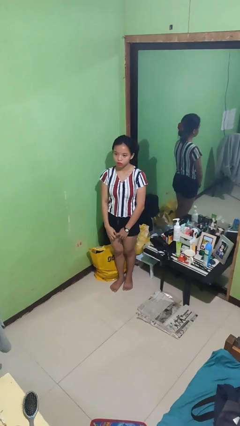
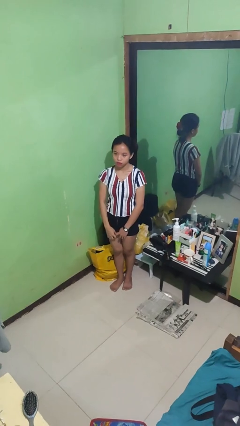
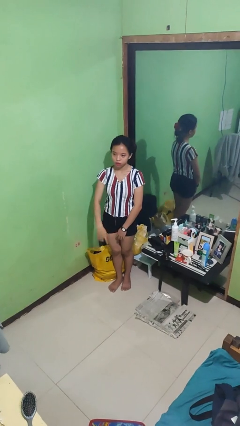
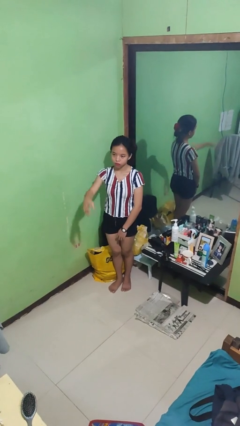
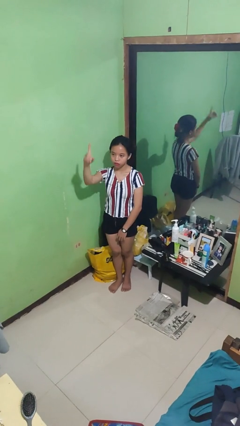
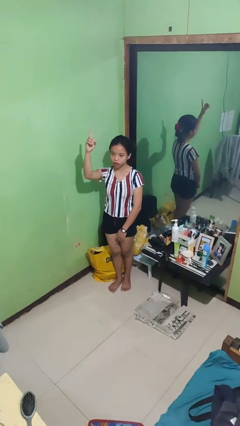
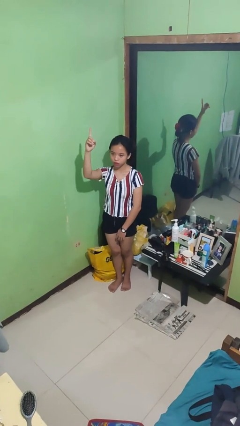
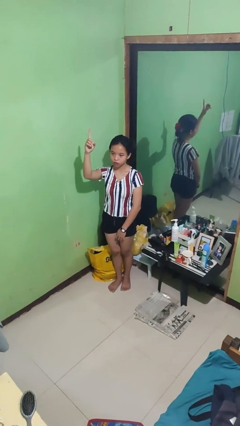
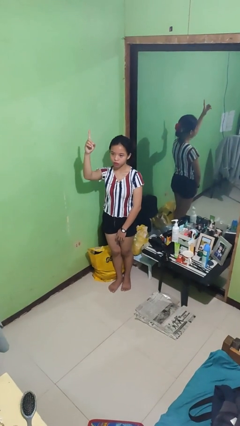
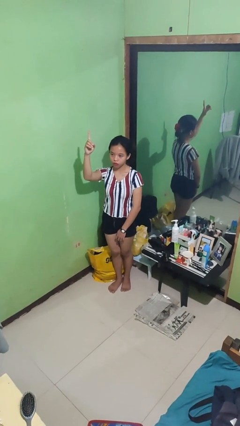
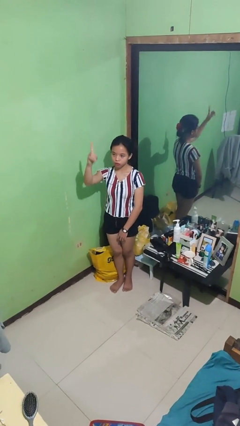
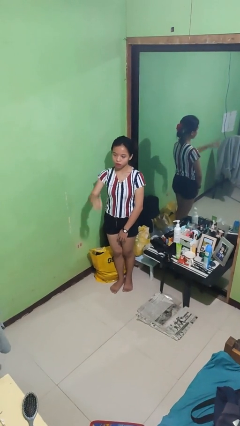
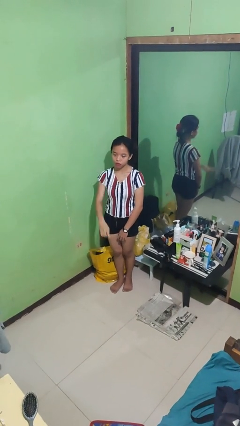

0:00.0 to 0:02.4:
person gestures number one

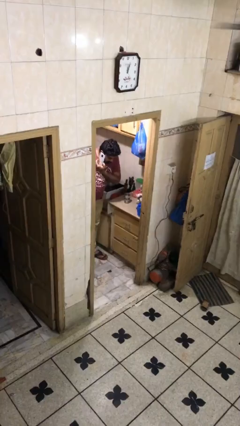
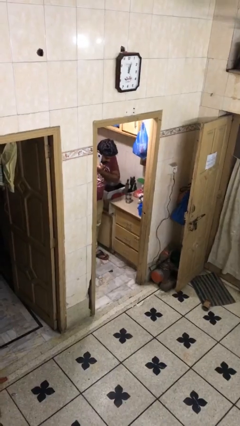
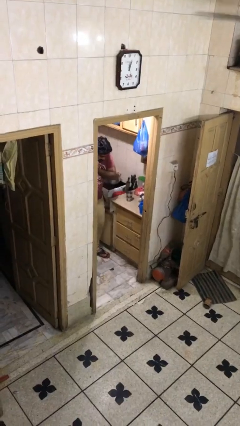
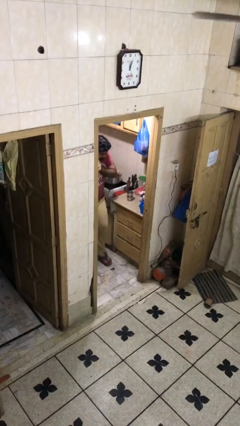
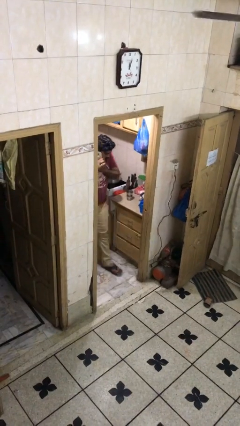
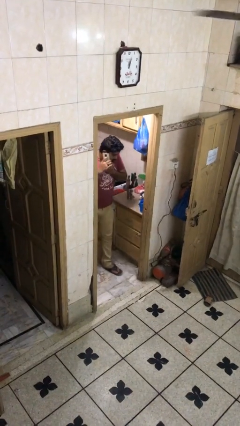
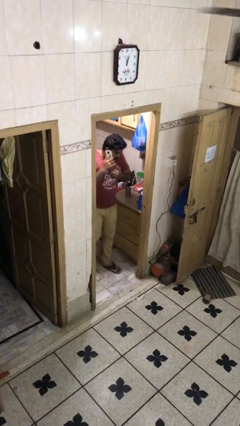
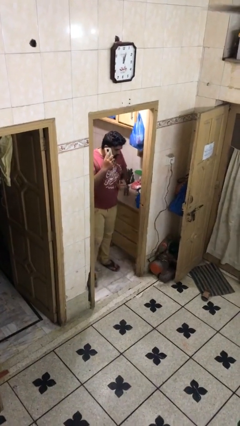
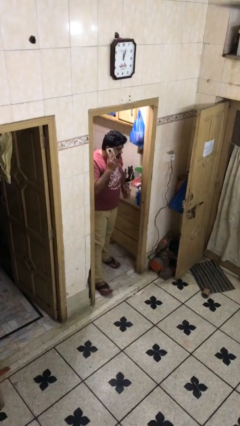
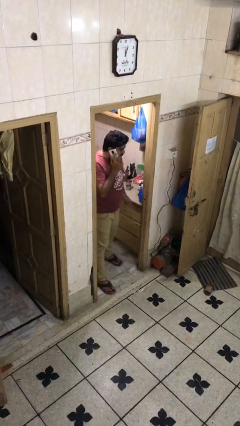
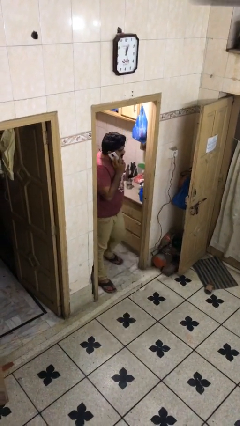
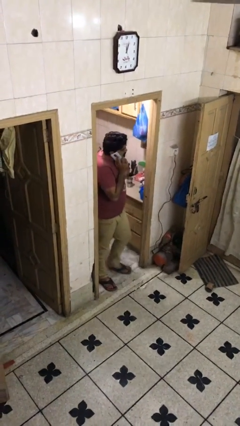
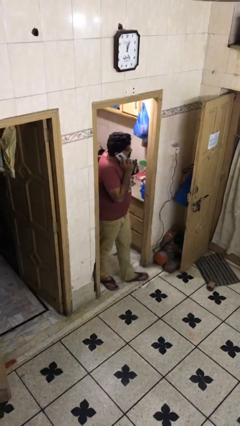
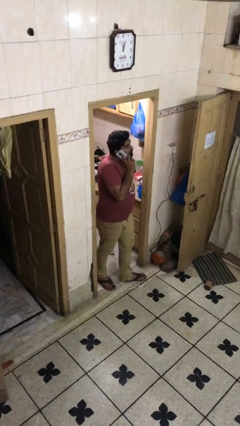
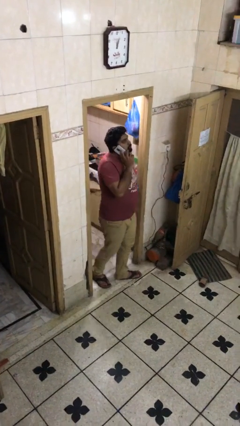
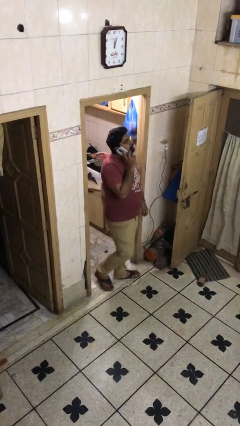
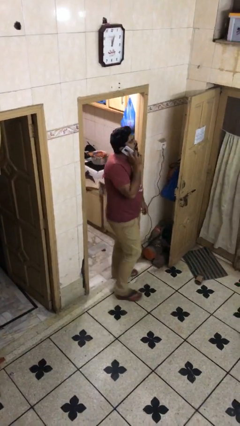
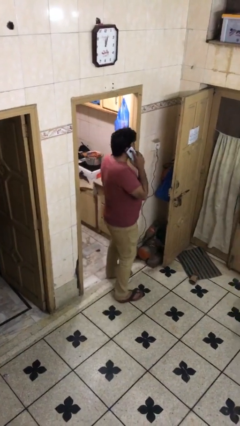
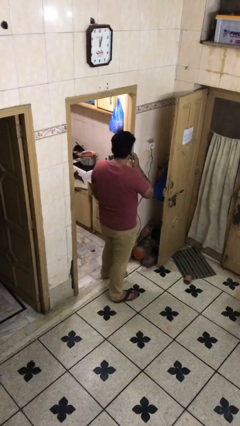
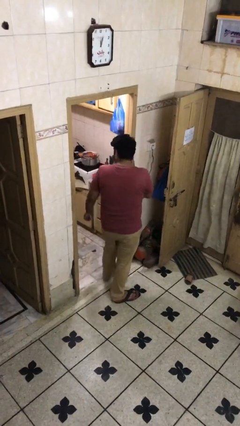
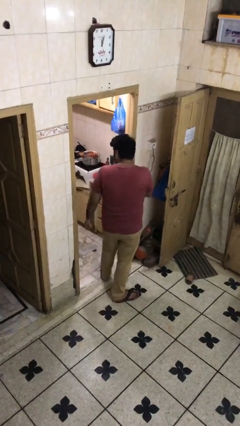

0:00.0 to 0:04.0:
person enters scene through structure

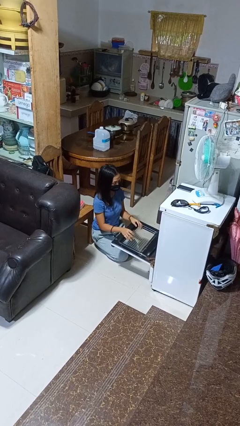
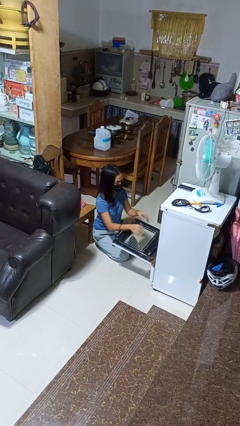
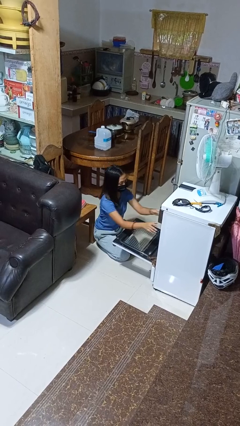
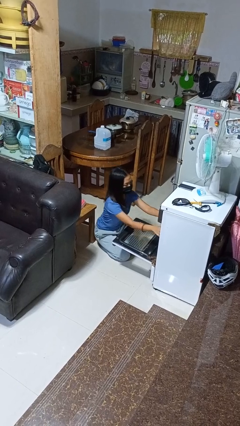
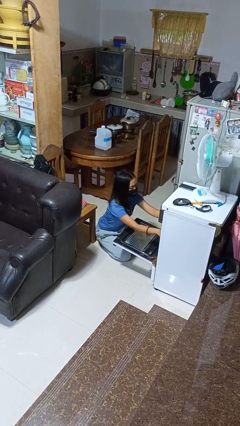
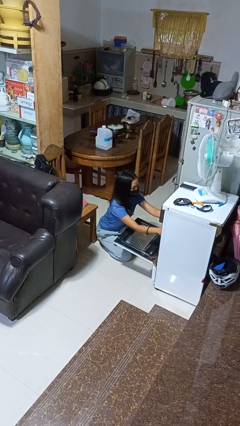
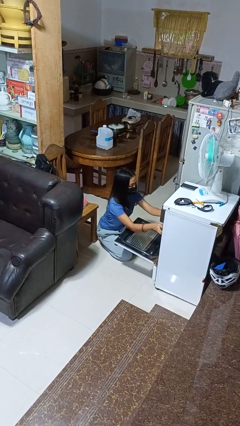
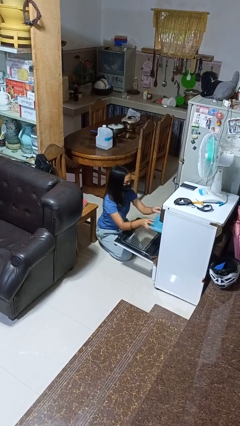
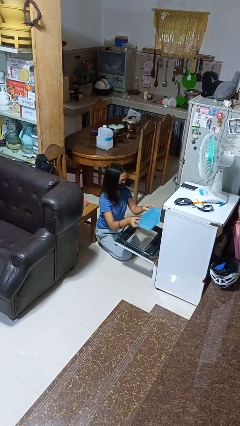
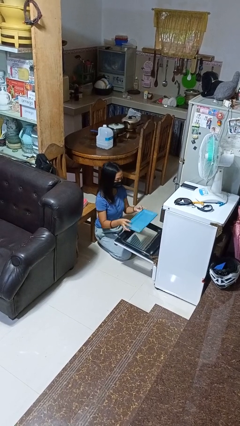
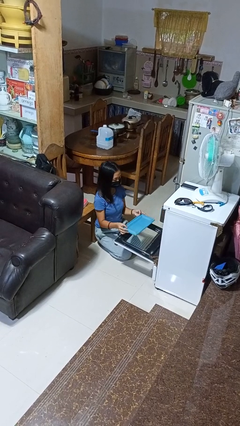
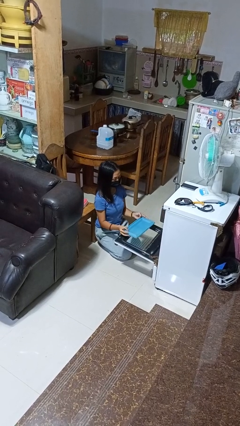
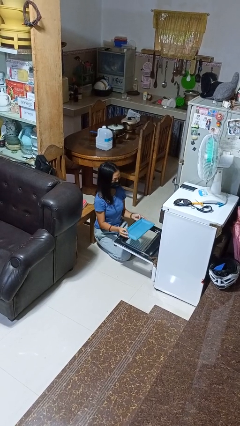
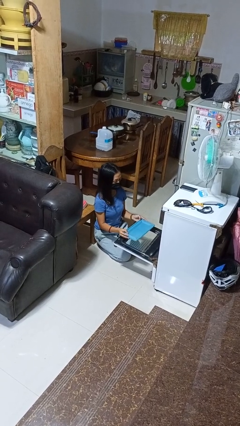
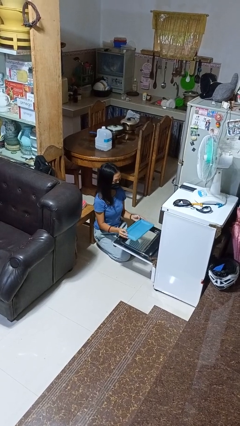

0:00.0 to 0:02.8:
person takes object from oven

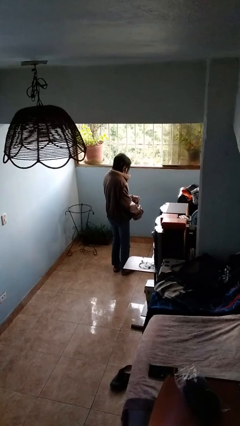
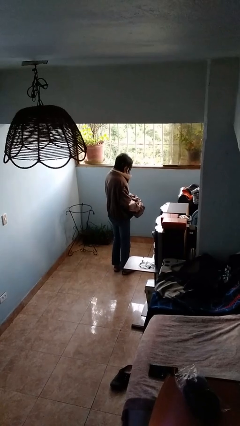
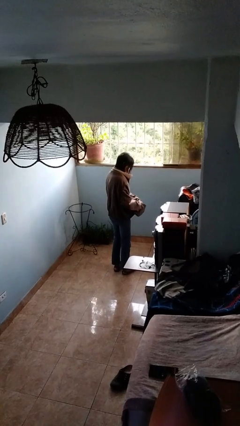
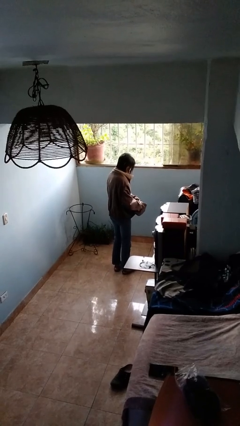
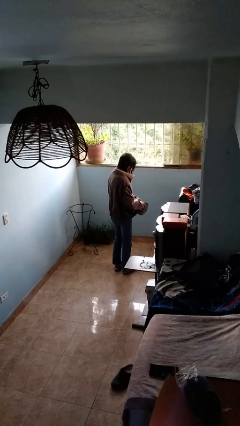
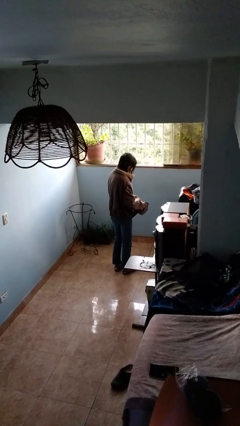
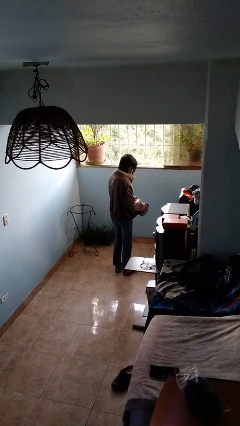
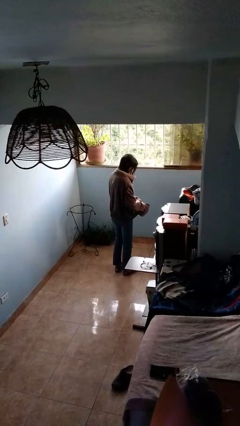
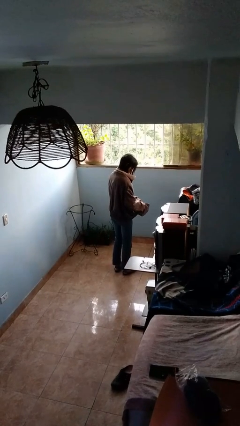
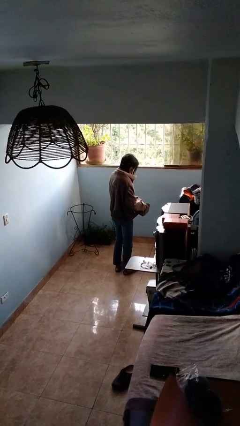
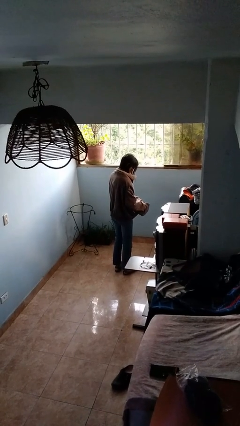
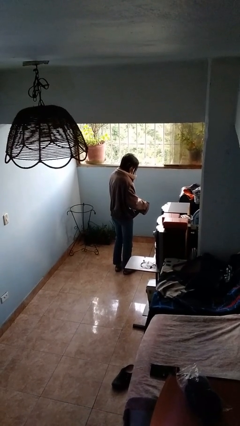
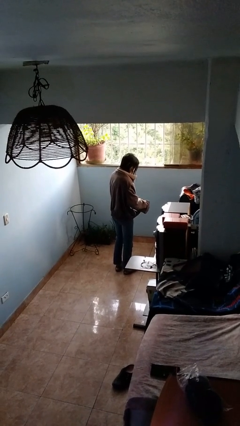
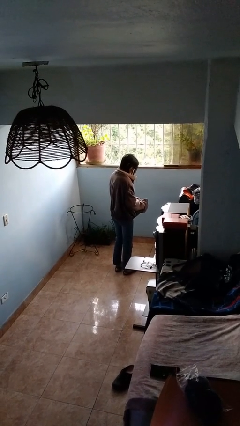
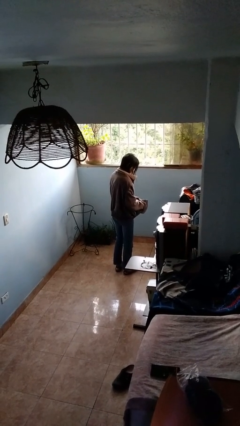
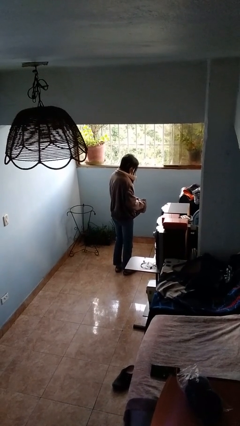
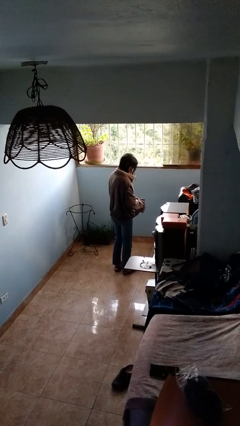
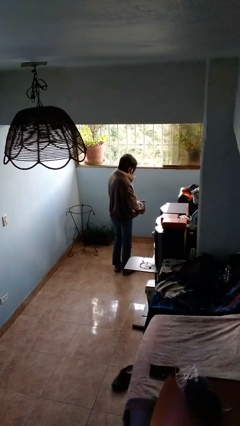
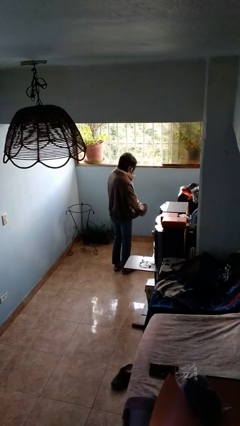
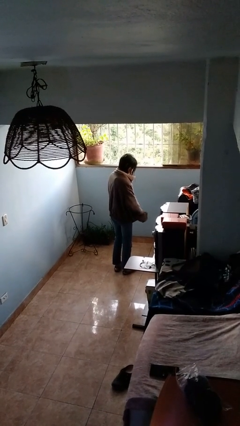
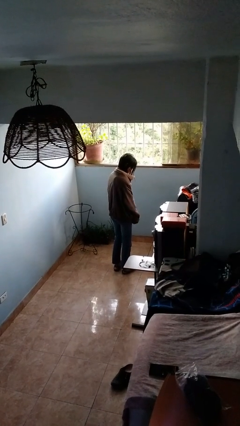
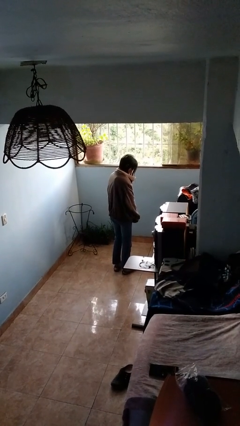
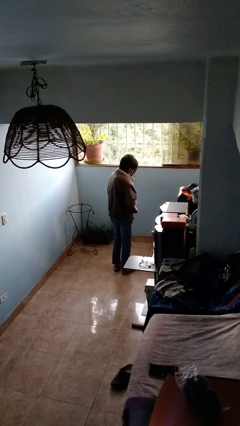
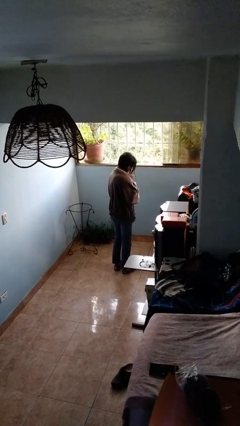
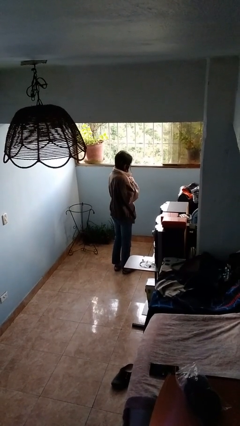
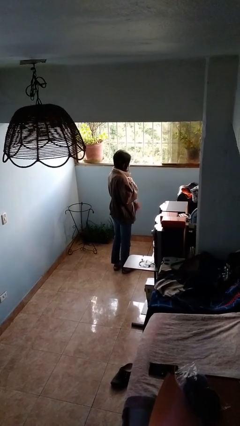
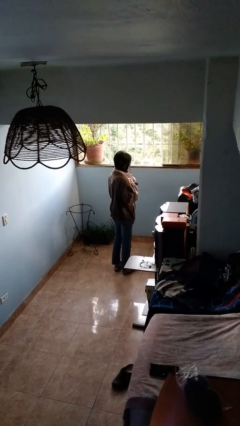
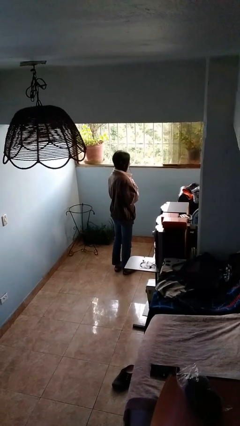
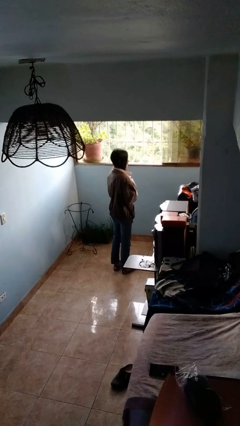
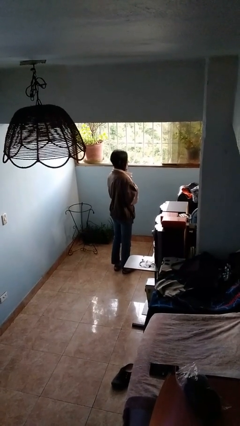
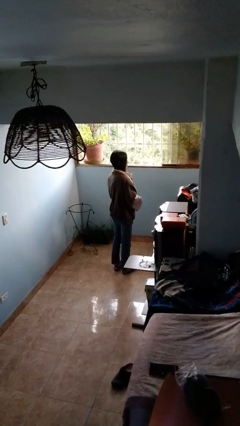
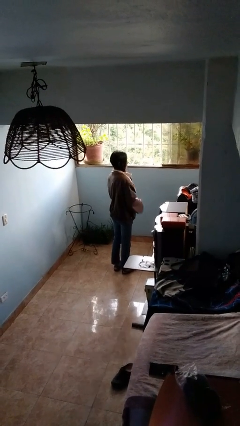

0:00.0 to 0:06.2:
person zips up jacket

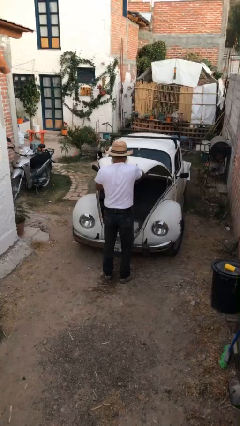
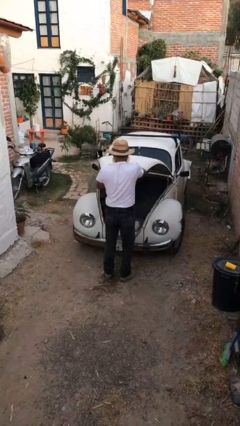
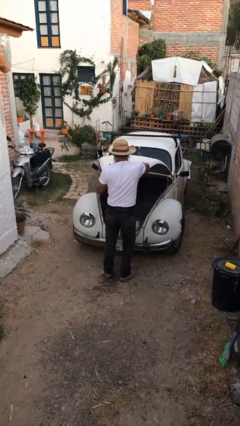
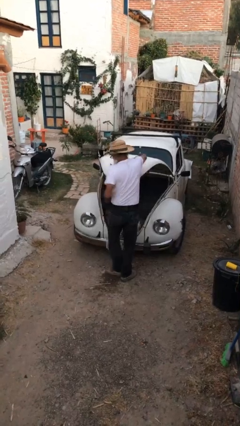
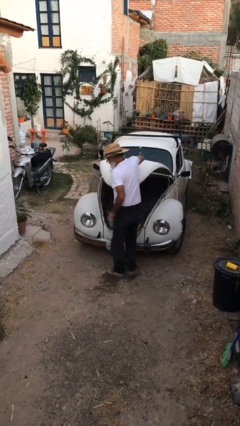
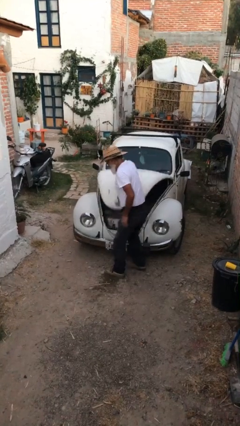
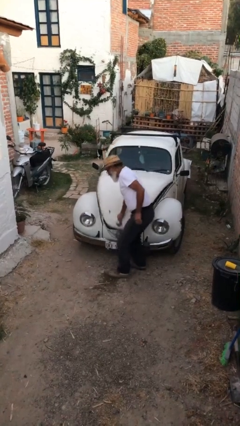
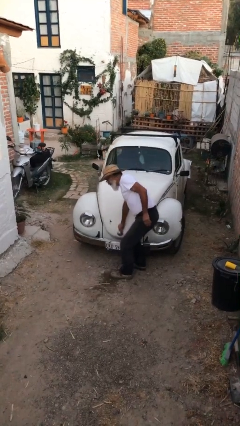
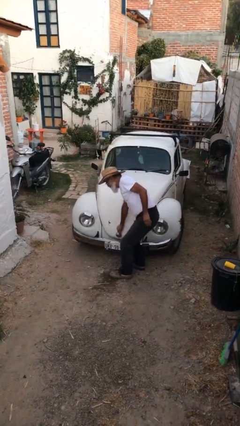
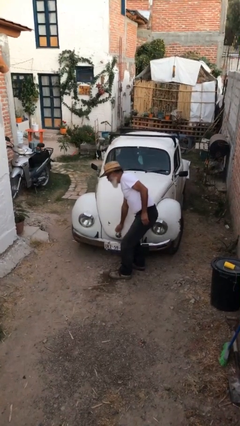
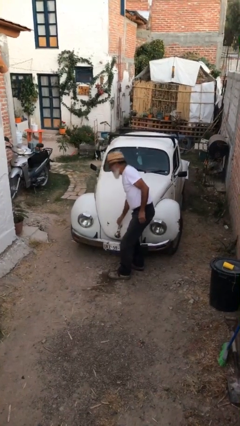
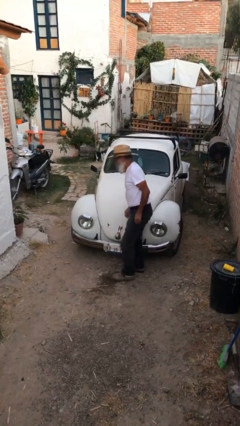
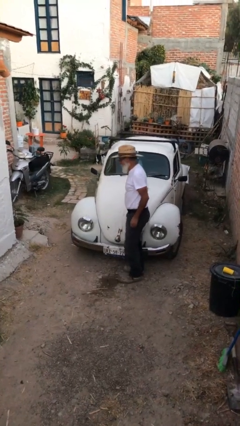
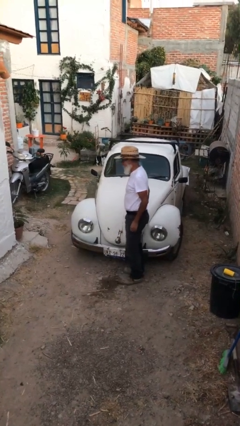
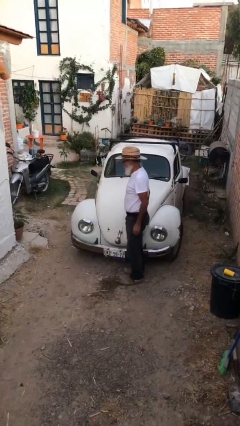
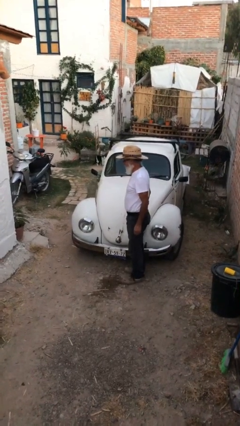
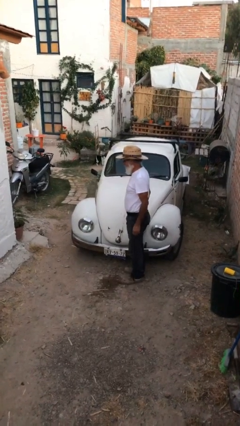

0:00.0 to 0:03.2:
person closes car trunk
